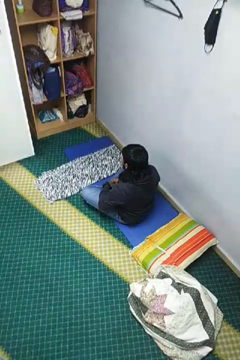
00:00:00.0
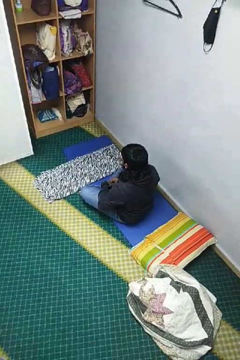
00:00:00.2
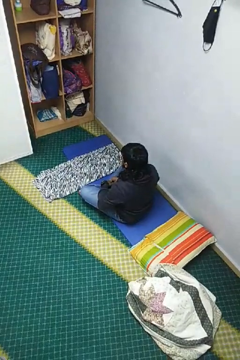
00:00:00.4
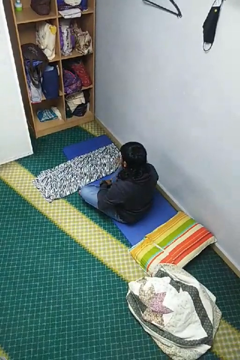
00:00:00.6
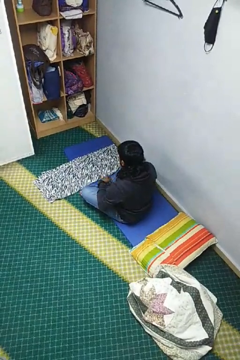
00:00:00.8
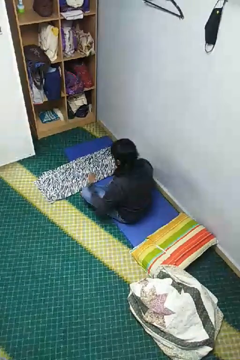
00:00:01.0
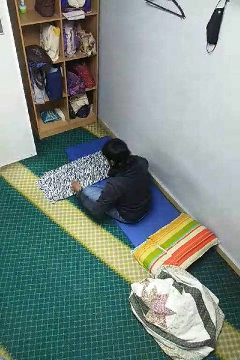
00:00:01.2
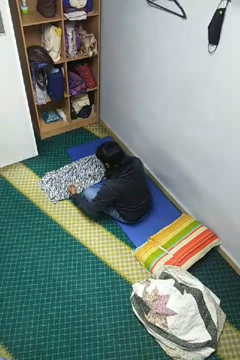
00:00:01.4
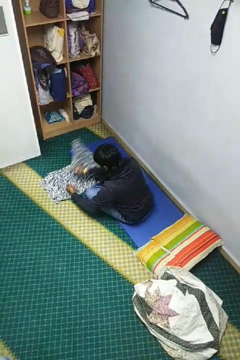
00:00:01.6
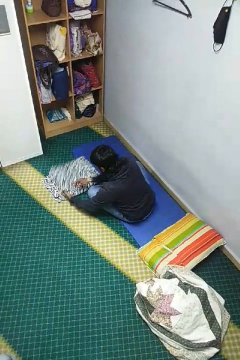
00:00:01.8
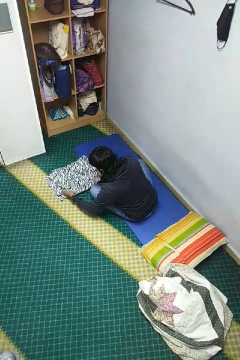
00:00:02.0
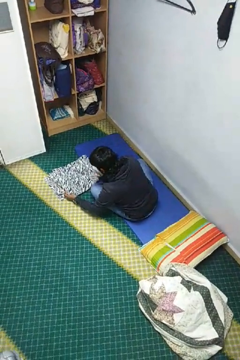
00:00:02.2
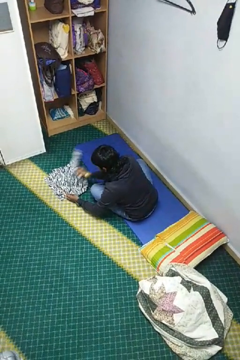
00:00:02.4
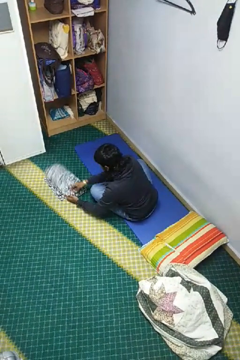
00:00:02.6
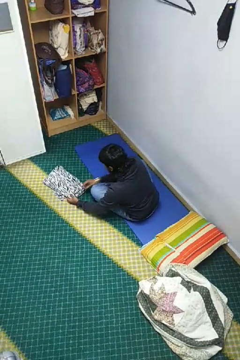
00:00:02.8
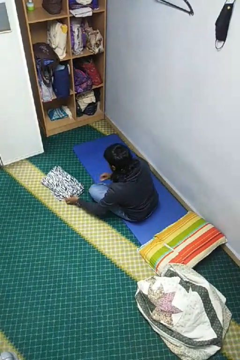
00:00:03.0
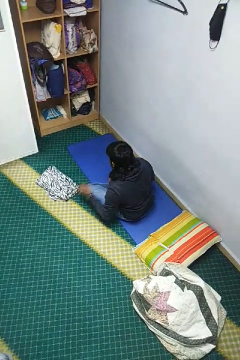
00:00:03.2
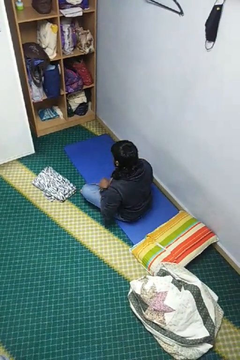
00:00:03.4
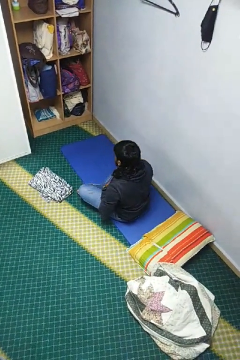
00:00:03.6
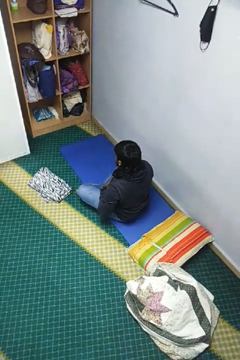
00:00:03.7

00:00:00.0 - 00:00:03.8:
person folds blanket

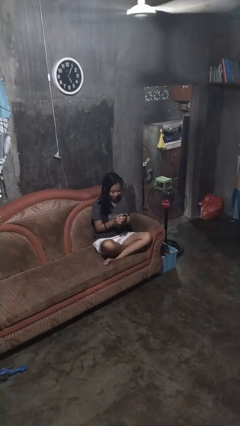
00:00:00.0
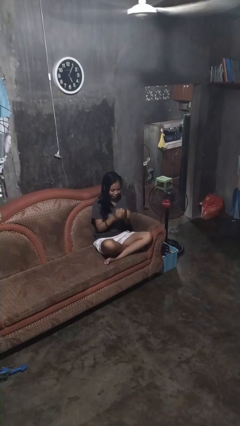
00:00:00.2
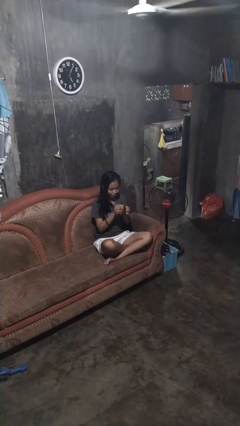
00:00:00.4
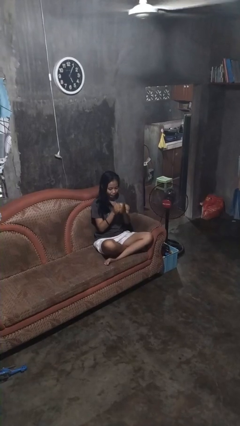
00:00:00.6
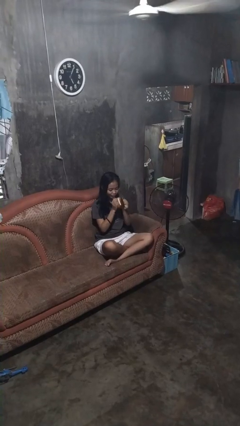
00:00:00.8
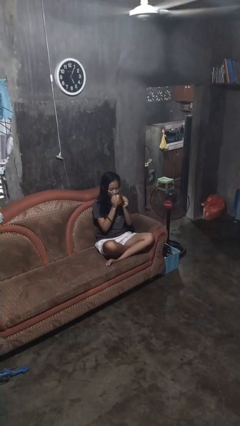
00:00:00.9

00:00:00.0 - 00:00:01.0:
person drinks from mug

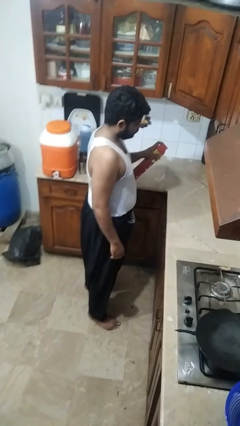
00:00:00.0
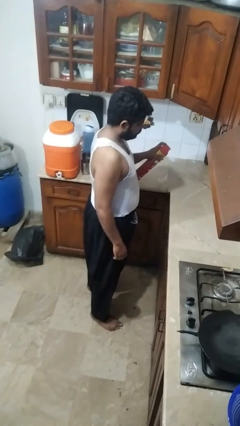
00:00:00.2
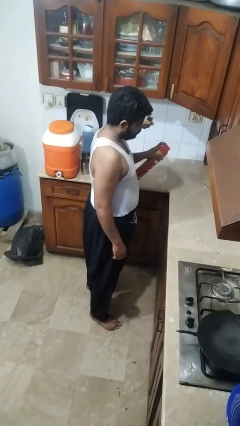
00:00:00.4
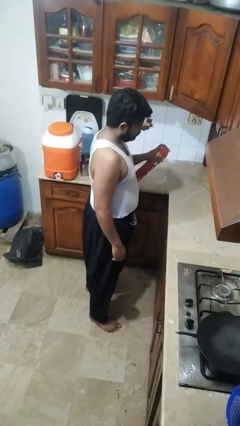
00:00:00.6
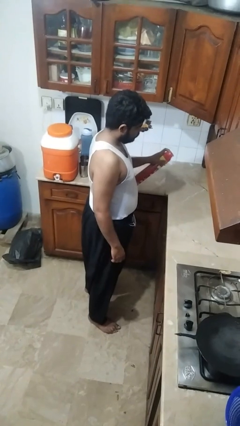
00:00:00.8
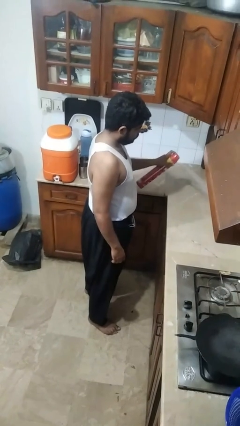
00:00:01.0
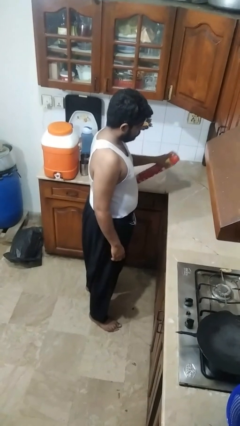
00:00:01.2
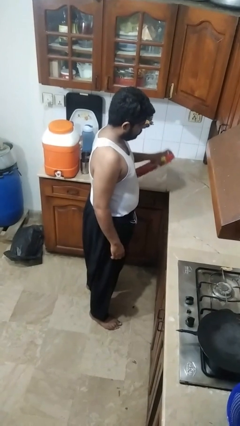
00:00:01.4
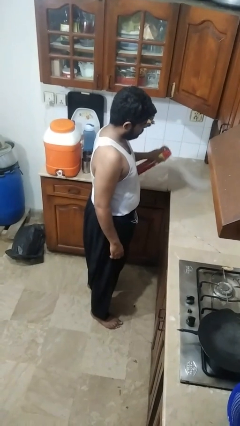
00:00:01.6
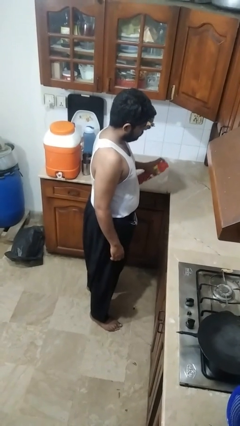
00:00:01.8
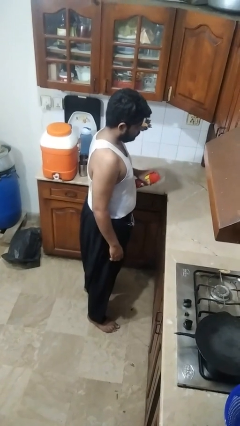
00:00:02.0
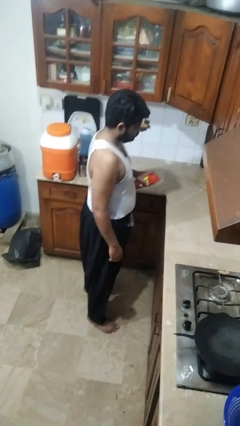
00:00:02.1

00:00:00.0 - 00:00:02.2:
person sprays from bottle

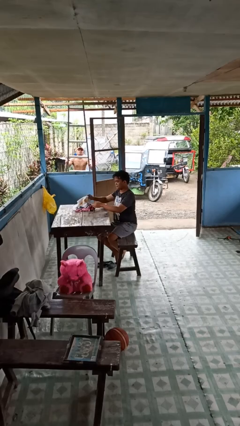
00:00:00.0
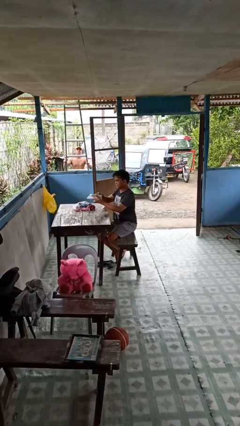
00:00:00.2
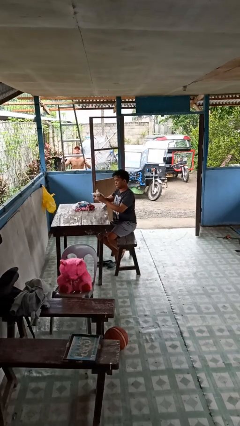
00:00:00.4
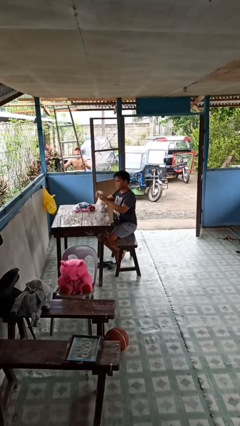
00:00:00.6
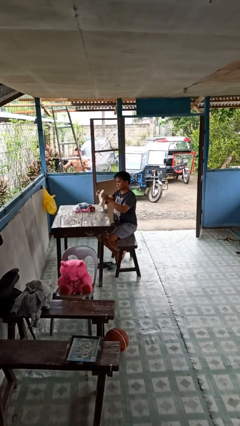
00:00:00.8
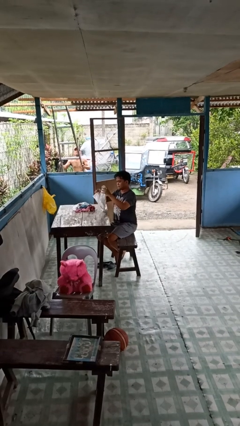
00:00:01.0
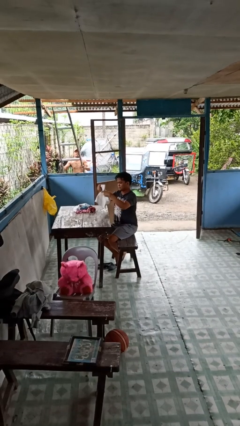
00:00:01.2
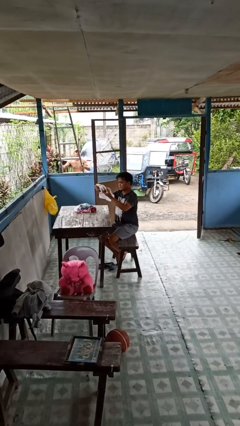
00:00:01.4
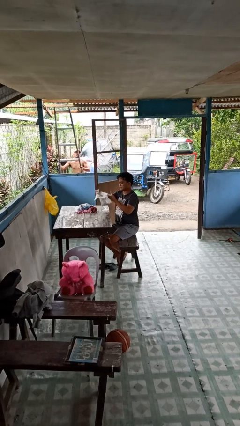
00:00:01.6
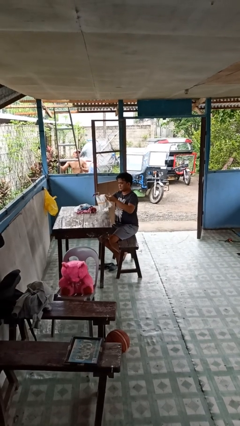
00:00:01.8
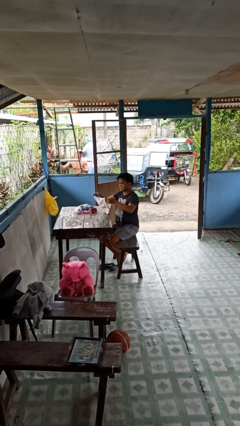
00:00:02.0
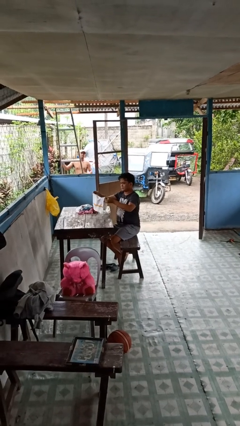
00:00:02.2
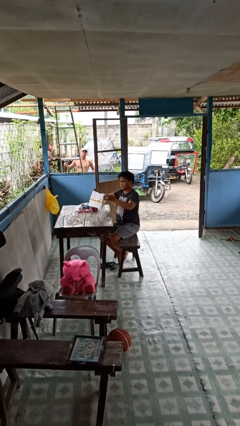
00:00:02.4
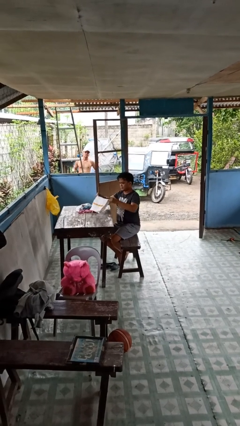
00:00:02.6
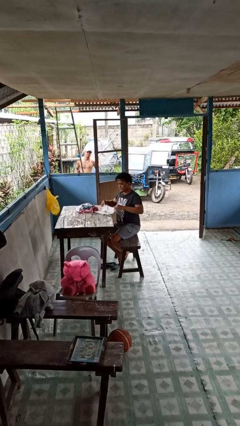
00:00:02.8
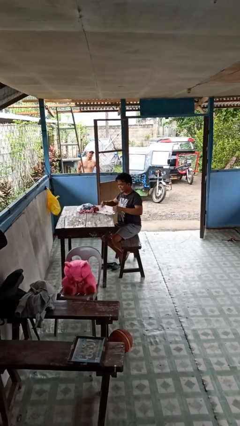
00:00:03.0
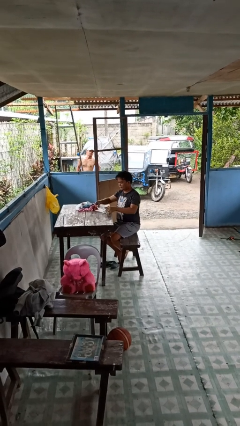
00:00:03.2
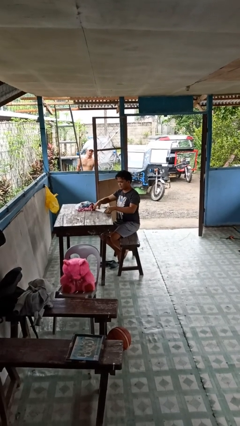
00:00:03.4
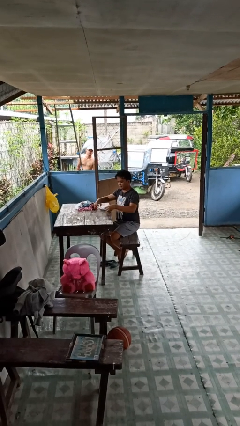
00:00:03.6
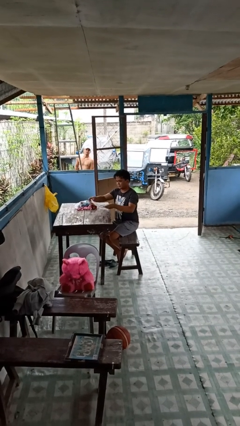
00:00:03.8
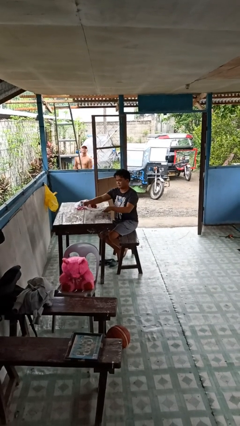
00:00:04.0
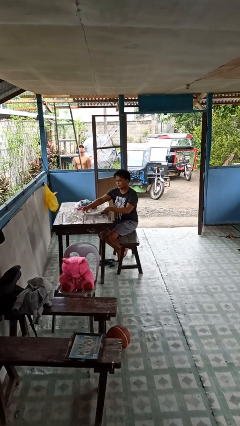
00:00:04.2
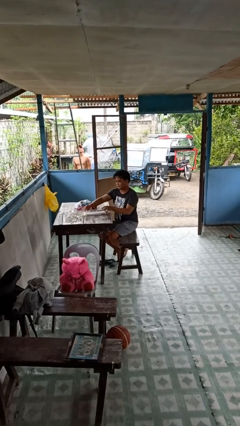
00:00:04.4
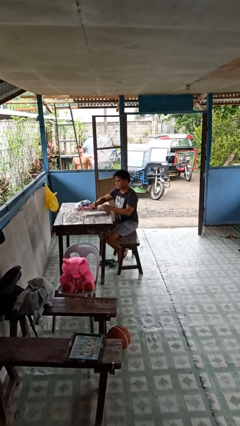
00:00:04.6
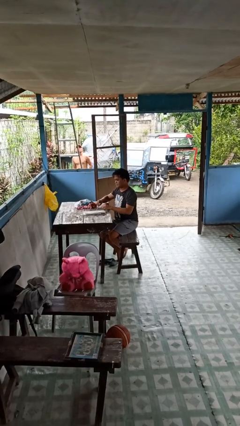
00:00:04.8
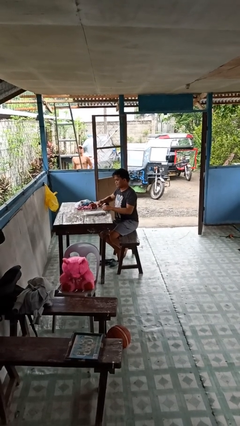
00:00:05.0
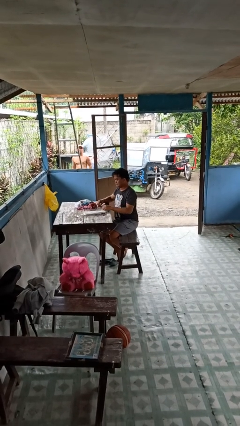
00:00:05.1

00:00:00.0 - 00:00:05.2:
person folds towel

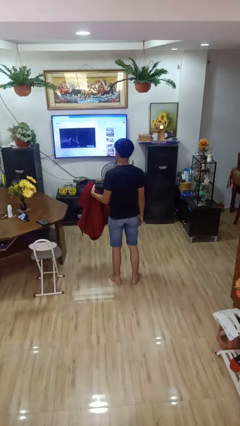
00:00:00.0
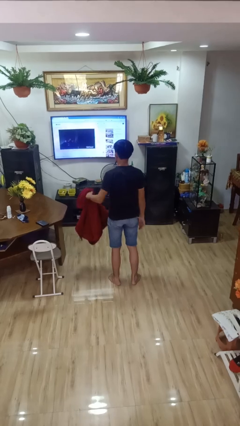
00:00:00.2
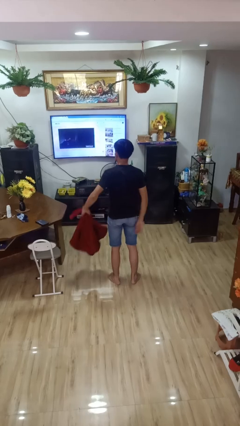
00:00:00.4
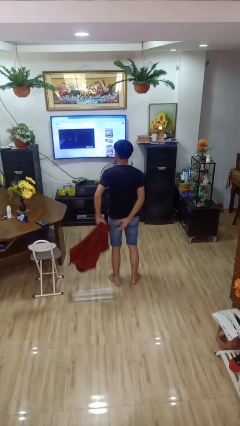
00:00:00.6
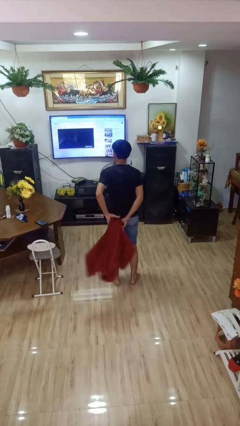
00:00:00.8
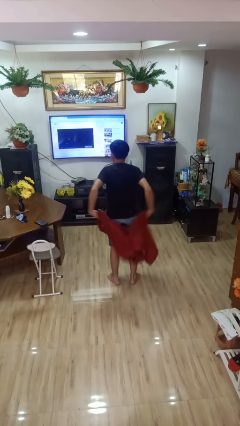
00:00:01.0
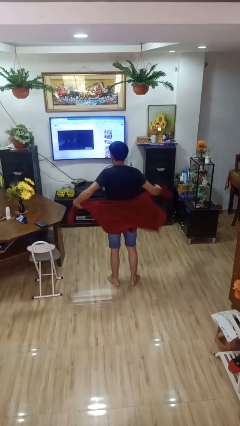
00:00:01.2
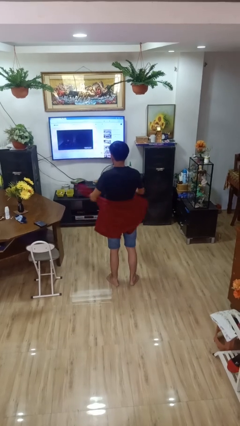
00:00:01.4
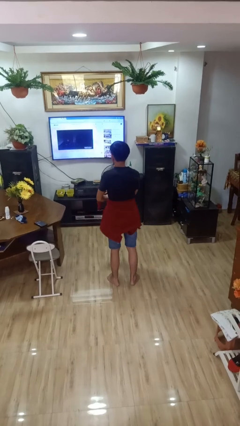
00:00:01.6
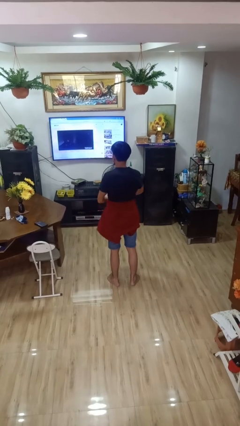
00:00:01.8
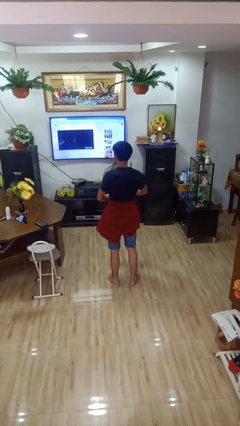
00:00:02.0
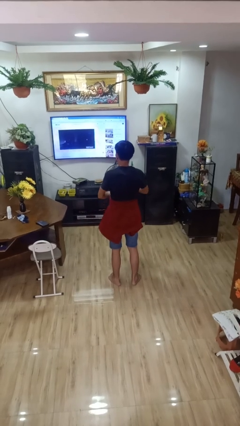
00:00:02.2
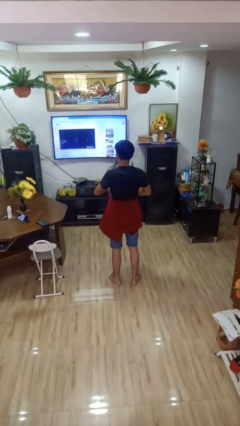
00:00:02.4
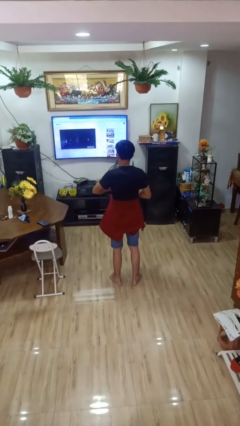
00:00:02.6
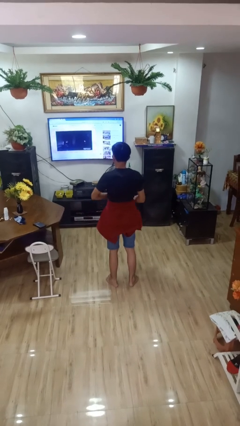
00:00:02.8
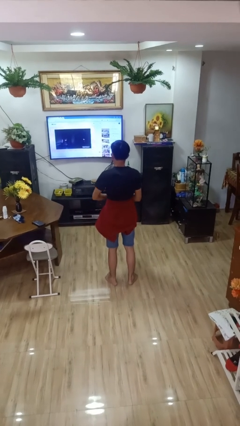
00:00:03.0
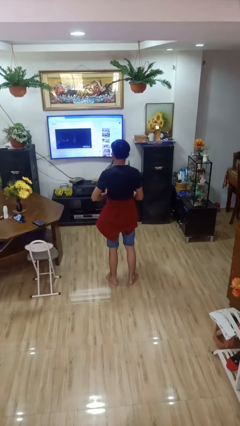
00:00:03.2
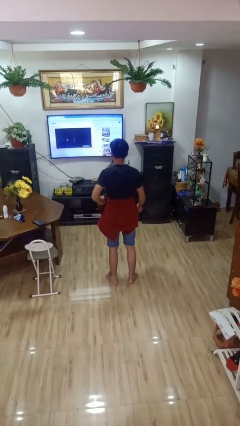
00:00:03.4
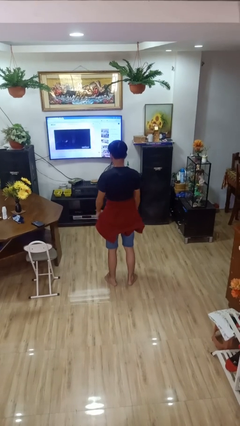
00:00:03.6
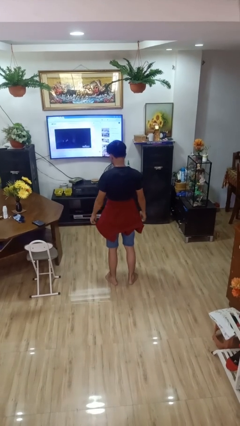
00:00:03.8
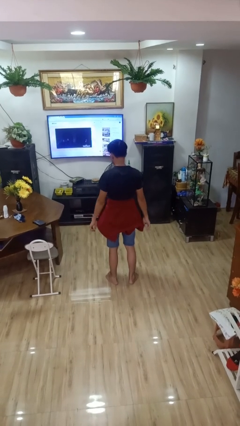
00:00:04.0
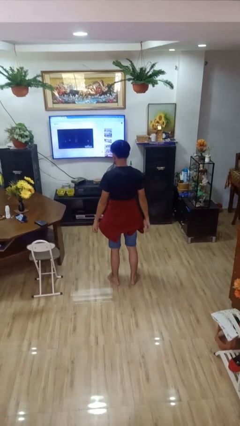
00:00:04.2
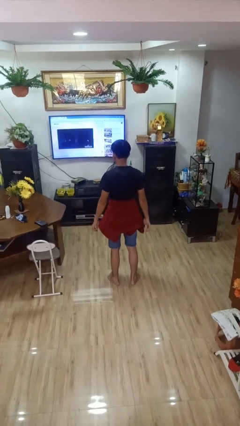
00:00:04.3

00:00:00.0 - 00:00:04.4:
person ties jacket around waist

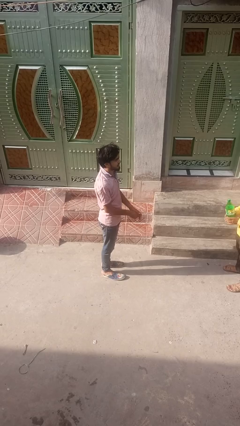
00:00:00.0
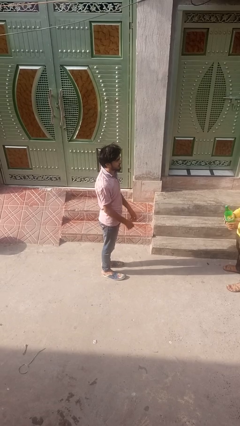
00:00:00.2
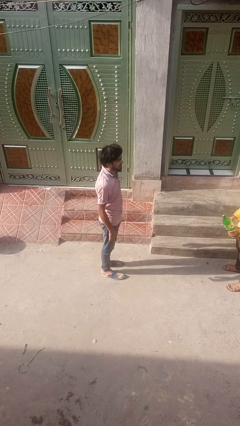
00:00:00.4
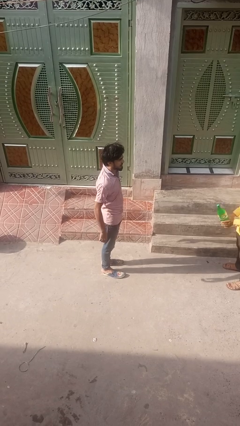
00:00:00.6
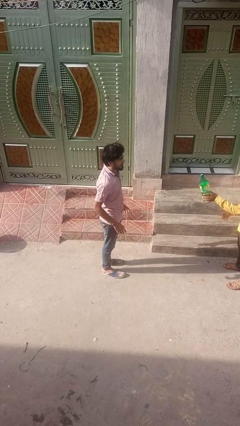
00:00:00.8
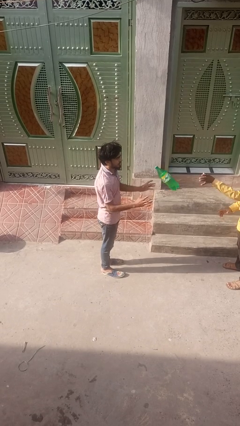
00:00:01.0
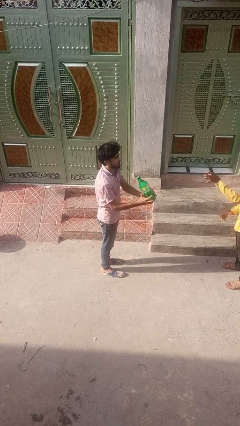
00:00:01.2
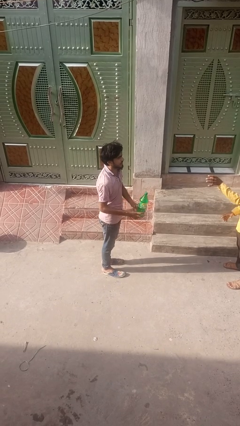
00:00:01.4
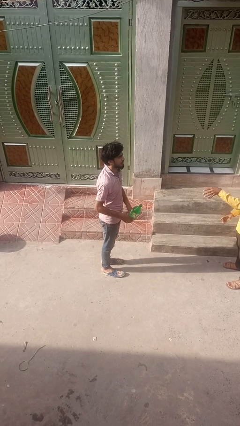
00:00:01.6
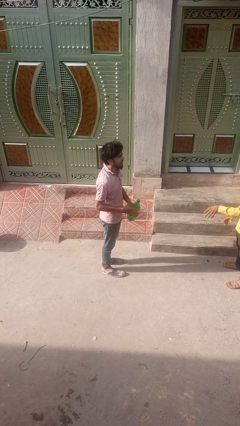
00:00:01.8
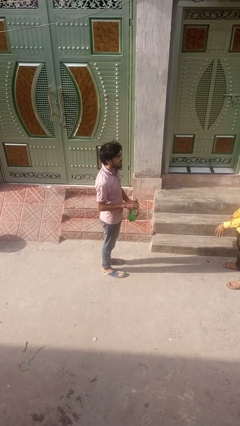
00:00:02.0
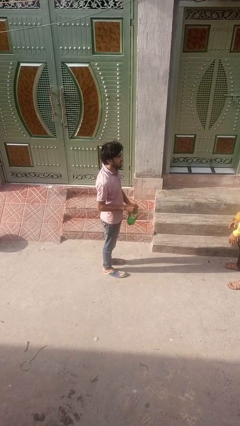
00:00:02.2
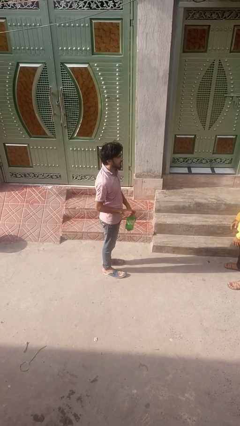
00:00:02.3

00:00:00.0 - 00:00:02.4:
person catches object from person
